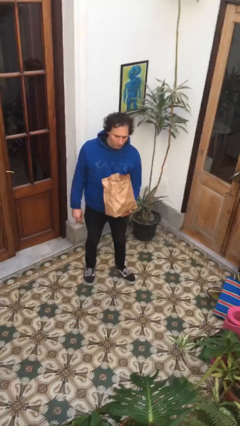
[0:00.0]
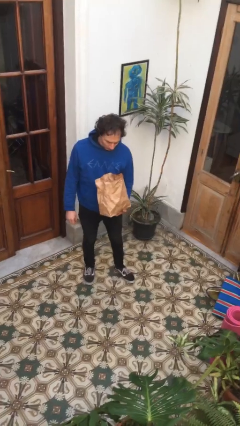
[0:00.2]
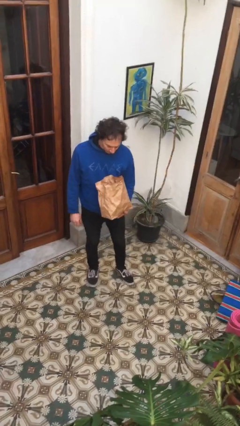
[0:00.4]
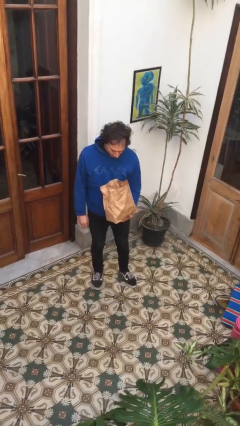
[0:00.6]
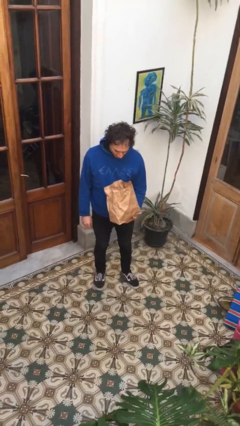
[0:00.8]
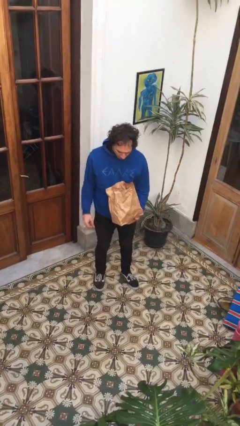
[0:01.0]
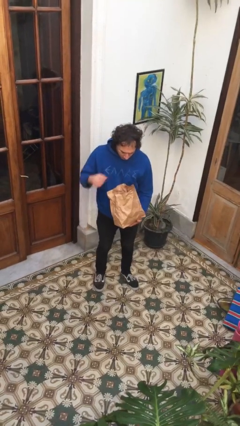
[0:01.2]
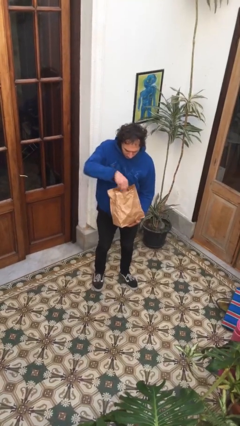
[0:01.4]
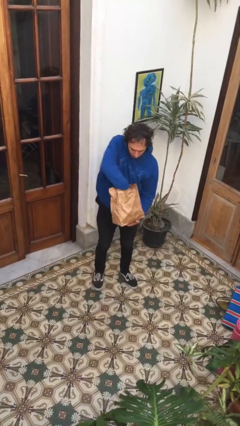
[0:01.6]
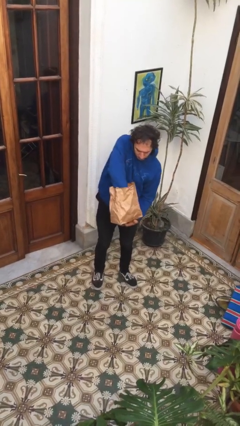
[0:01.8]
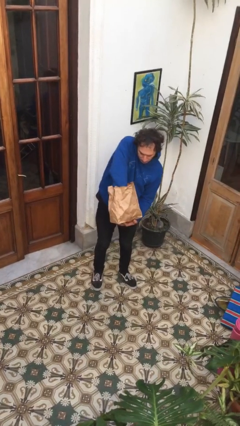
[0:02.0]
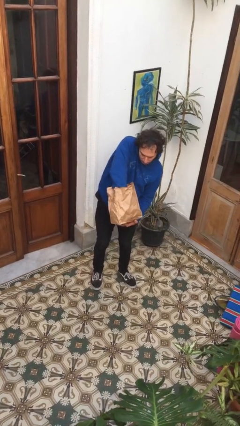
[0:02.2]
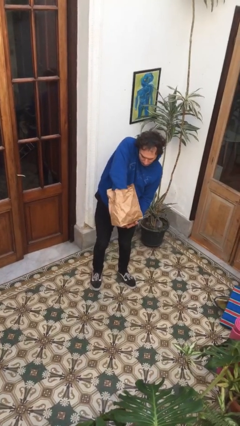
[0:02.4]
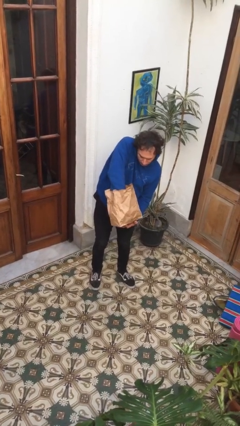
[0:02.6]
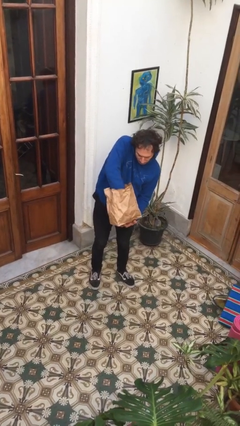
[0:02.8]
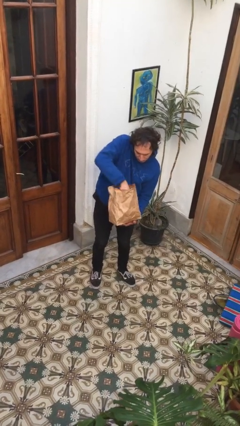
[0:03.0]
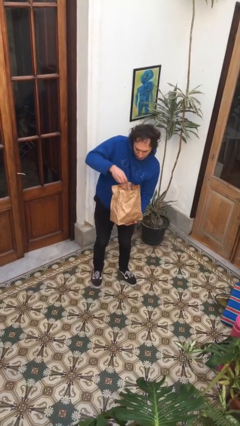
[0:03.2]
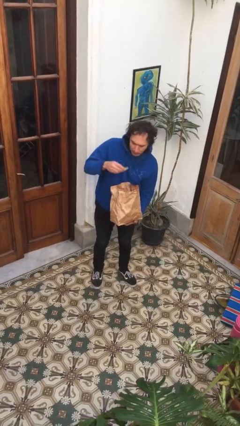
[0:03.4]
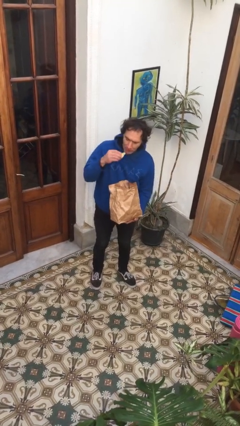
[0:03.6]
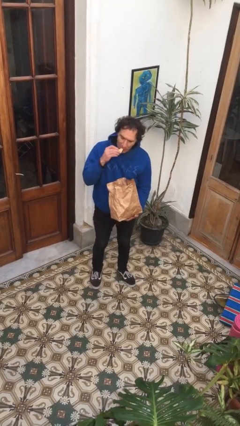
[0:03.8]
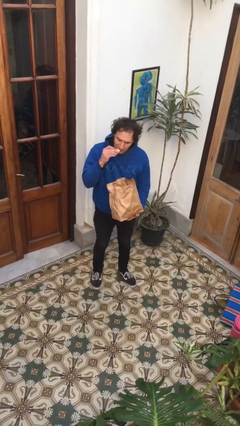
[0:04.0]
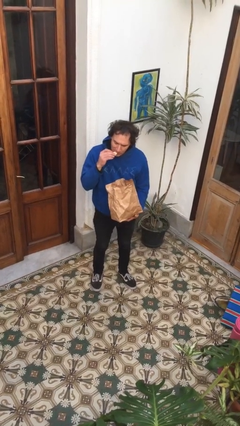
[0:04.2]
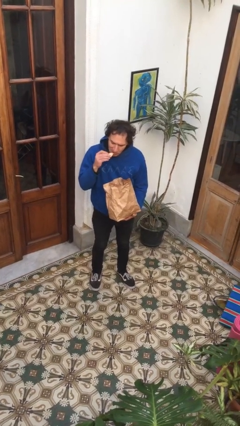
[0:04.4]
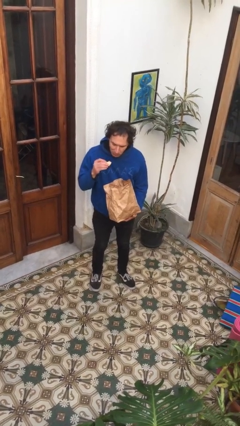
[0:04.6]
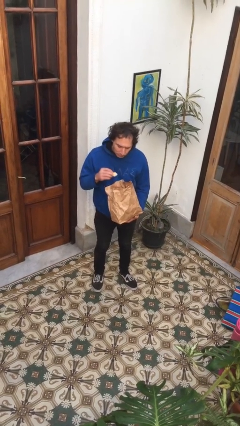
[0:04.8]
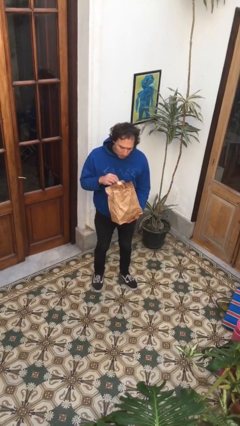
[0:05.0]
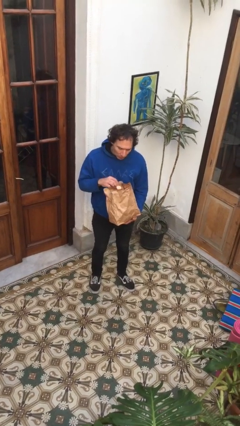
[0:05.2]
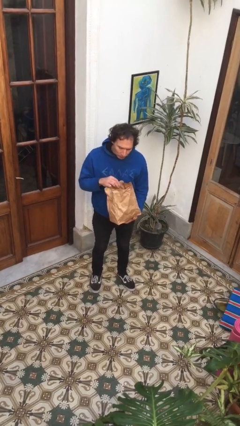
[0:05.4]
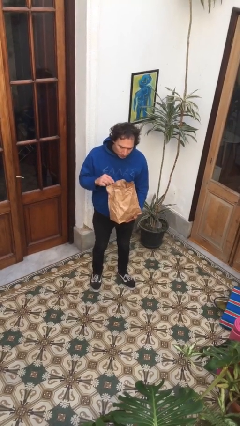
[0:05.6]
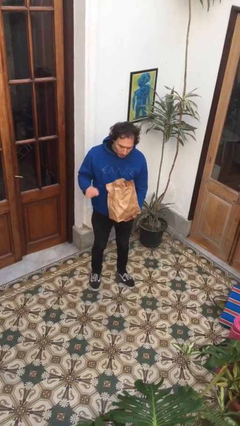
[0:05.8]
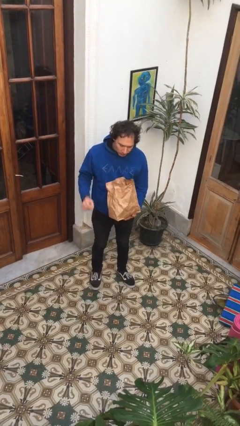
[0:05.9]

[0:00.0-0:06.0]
person eats snack from bag

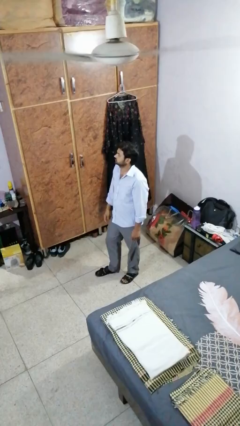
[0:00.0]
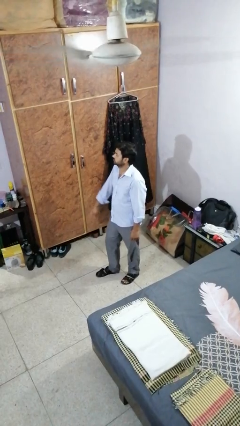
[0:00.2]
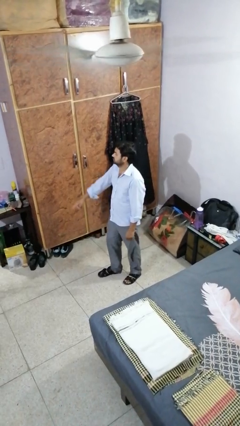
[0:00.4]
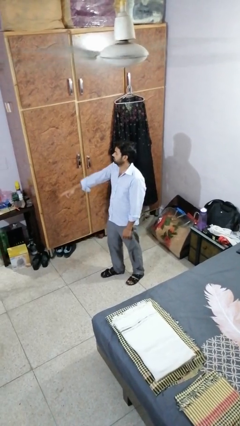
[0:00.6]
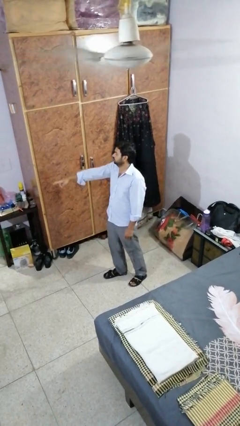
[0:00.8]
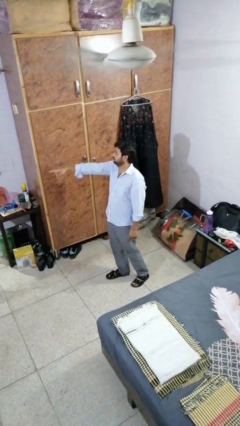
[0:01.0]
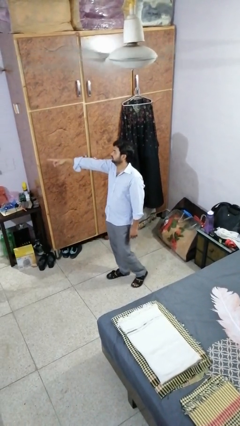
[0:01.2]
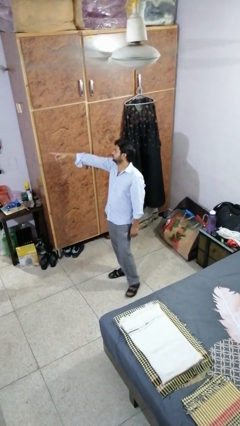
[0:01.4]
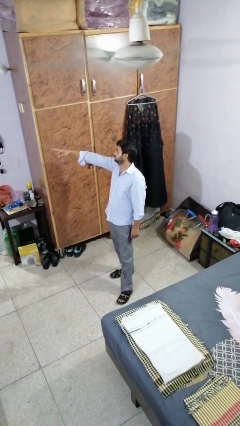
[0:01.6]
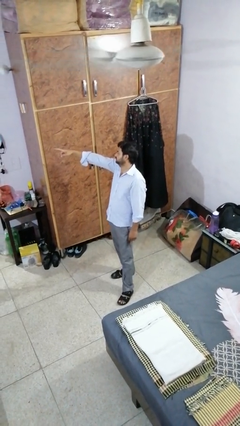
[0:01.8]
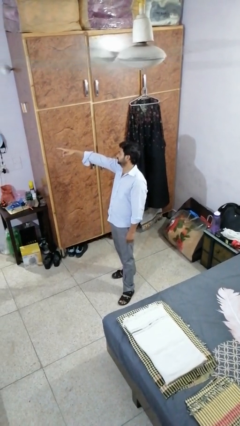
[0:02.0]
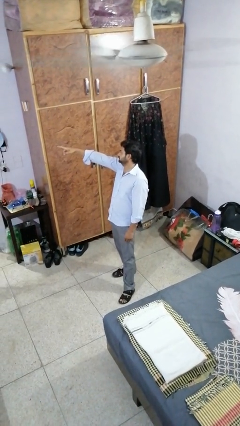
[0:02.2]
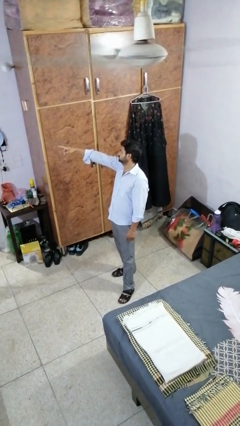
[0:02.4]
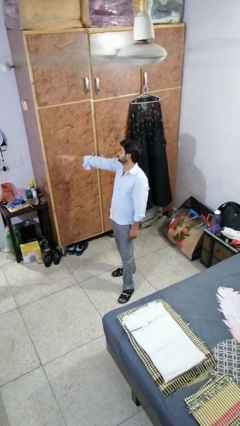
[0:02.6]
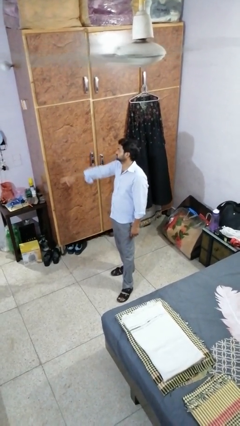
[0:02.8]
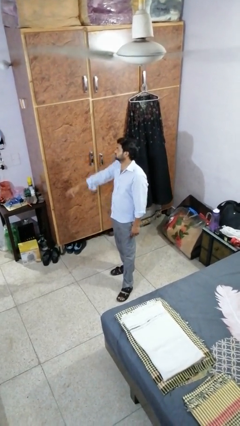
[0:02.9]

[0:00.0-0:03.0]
person points at person

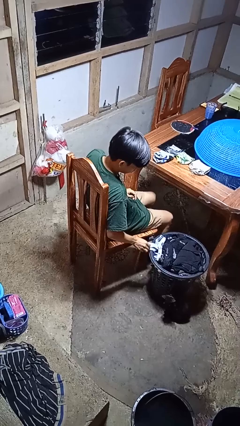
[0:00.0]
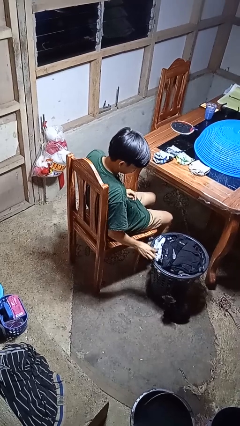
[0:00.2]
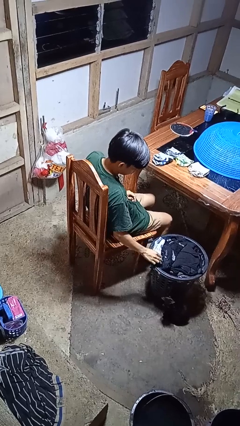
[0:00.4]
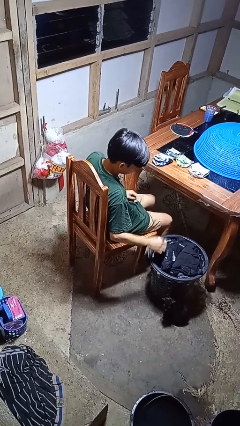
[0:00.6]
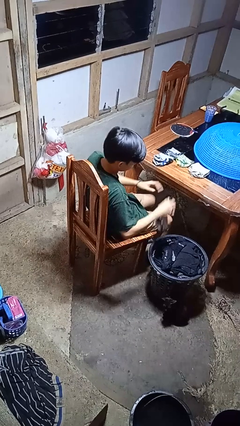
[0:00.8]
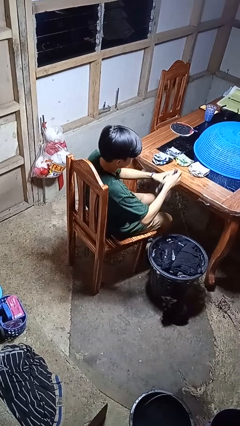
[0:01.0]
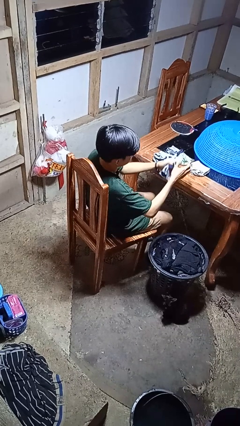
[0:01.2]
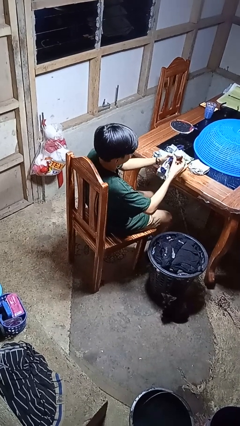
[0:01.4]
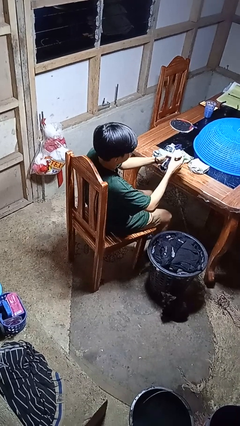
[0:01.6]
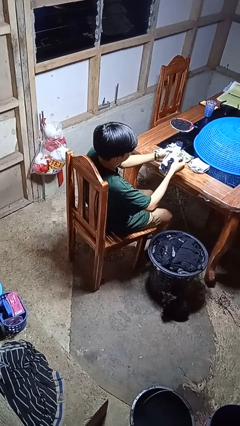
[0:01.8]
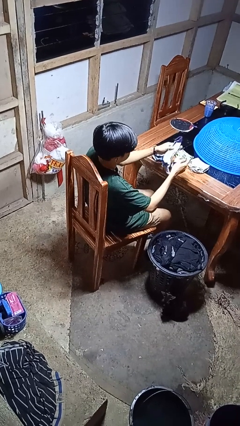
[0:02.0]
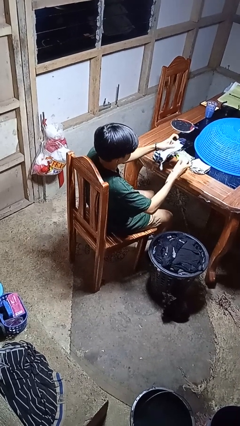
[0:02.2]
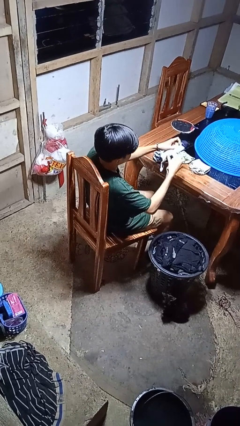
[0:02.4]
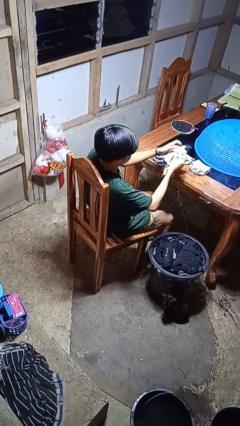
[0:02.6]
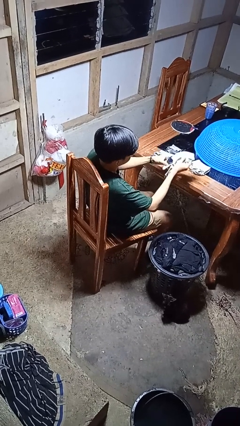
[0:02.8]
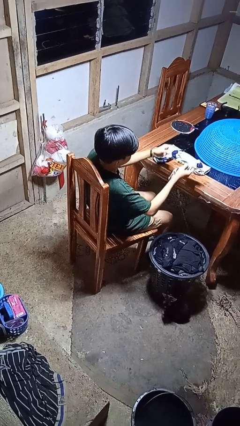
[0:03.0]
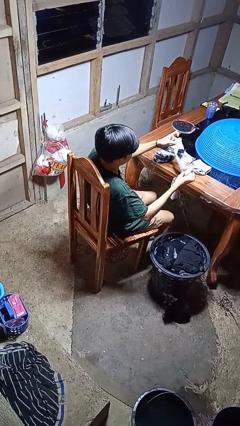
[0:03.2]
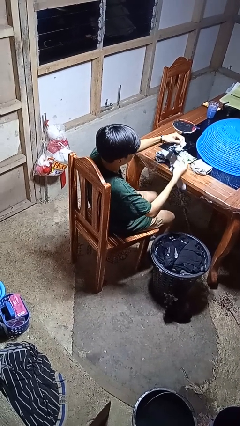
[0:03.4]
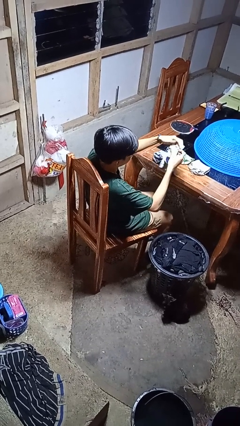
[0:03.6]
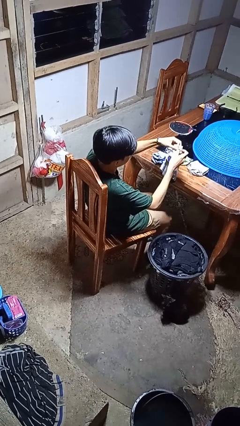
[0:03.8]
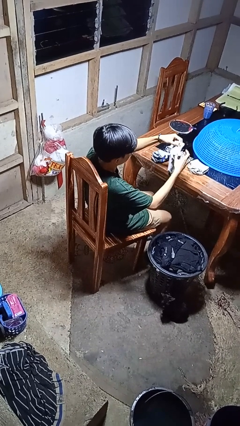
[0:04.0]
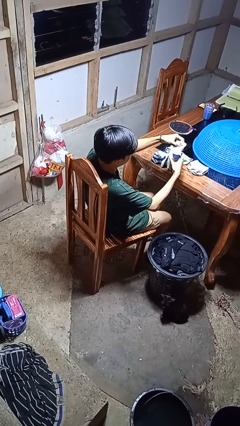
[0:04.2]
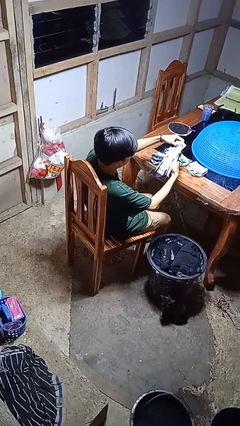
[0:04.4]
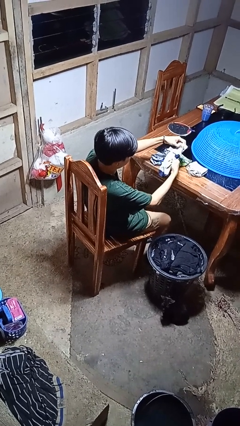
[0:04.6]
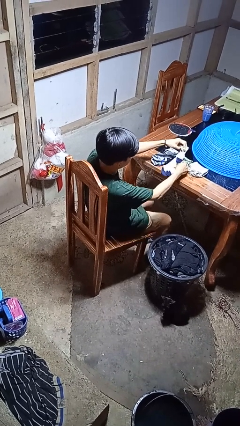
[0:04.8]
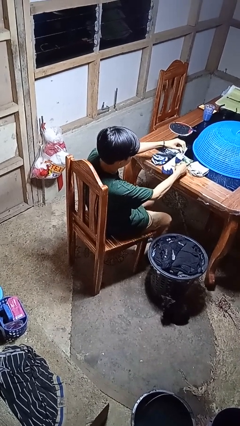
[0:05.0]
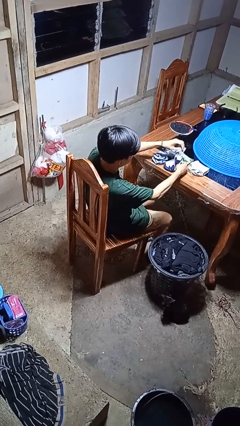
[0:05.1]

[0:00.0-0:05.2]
person folds socks

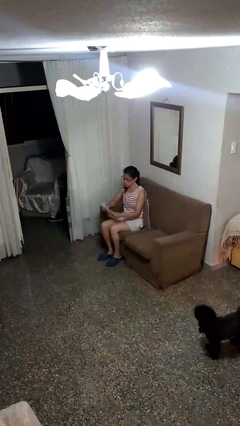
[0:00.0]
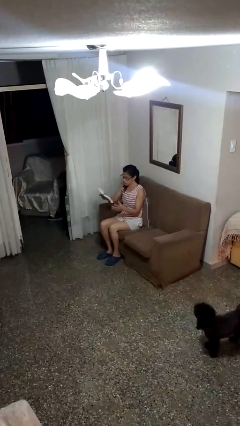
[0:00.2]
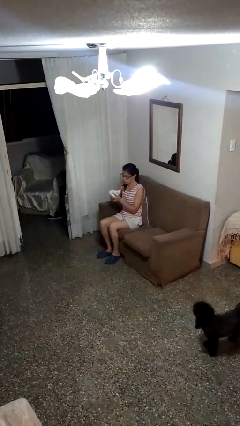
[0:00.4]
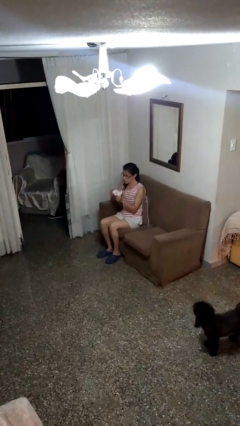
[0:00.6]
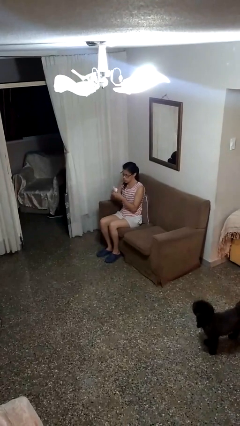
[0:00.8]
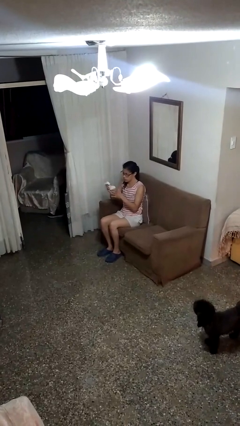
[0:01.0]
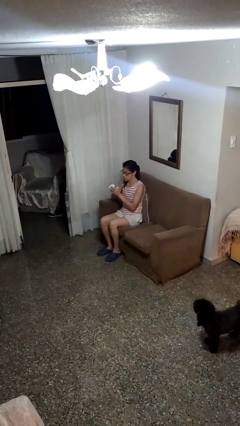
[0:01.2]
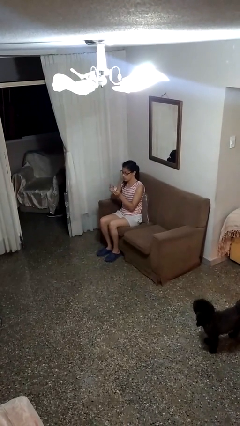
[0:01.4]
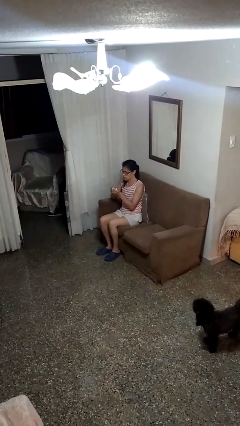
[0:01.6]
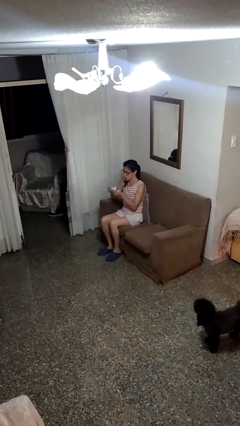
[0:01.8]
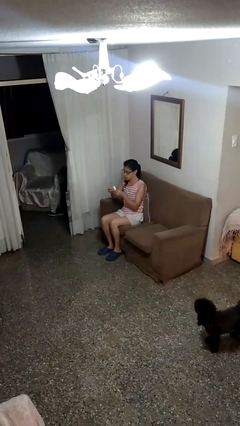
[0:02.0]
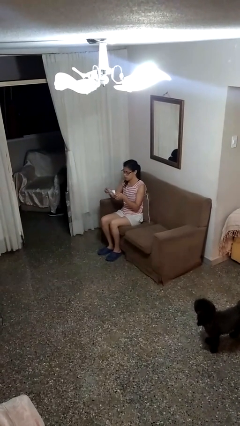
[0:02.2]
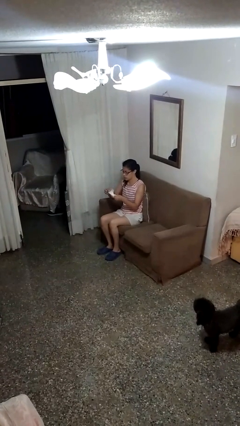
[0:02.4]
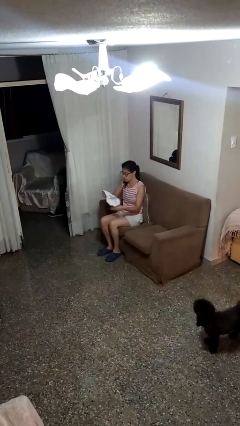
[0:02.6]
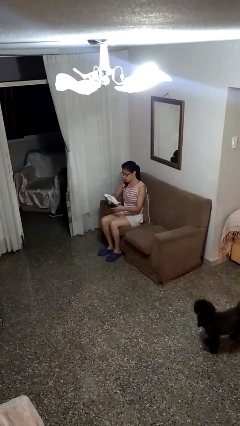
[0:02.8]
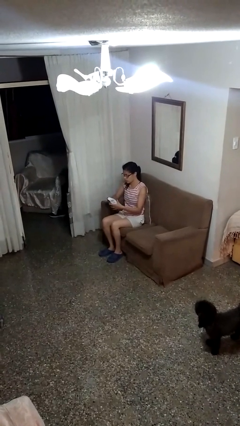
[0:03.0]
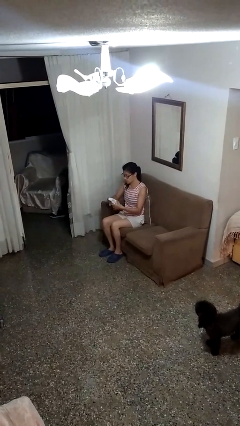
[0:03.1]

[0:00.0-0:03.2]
person crumples paper

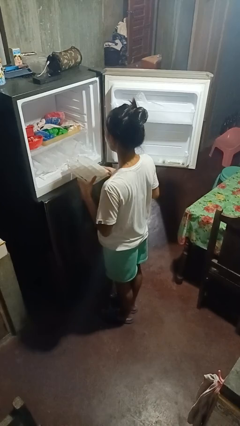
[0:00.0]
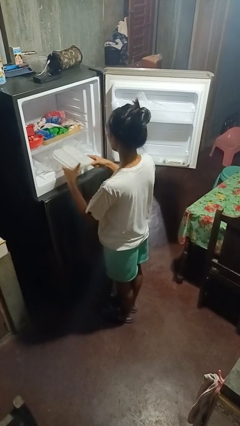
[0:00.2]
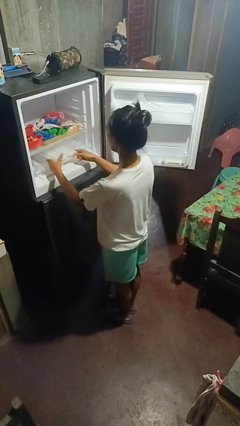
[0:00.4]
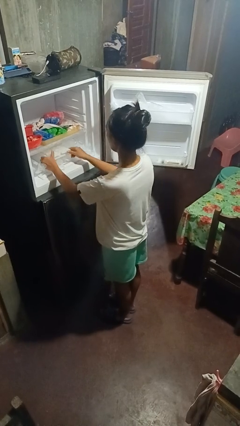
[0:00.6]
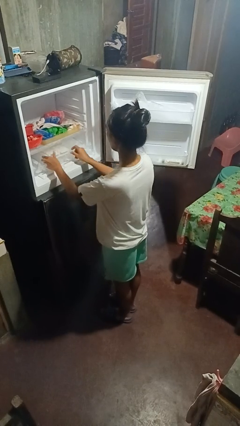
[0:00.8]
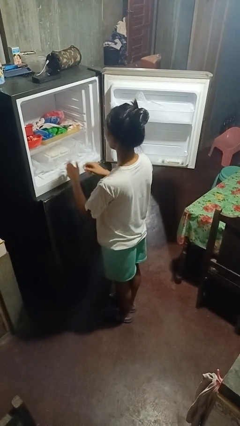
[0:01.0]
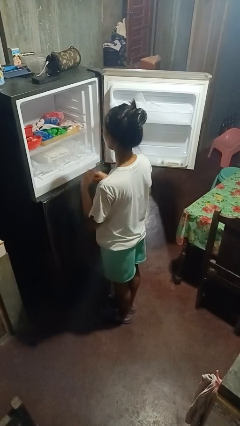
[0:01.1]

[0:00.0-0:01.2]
person puts object into refrigerator
